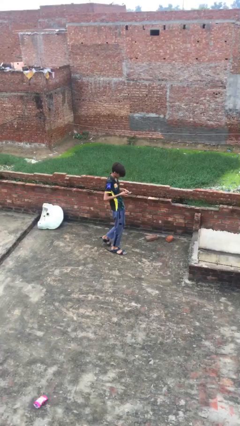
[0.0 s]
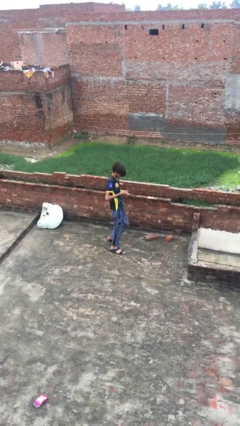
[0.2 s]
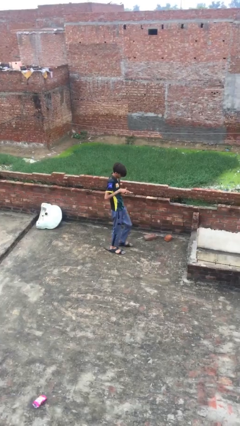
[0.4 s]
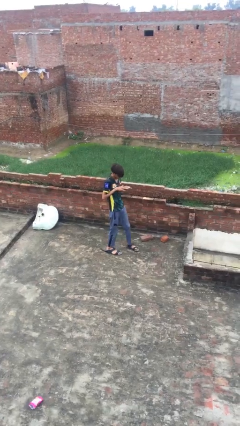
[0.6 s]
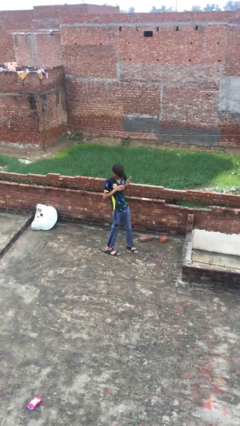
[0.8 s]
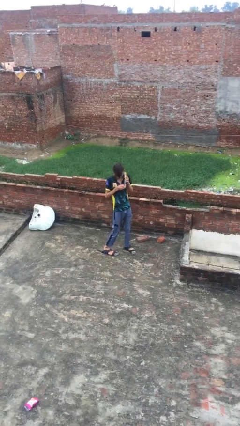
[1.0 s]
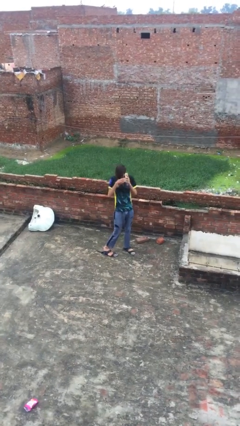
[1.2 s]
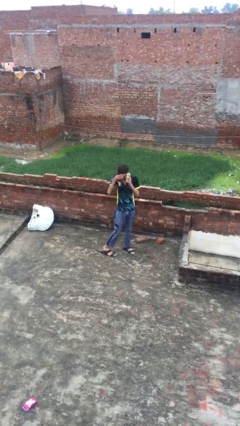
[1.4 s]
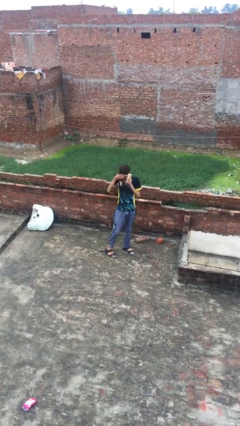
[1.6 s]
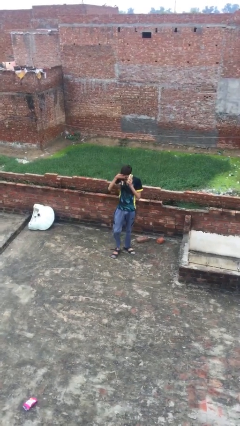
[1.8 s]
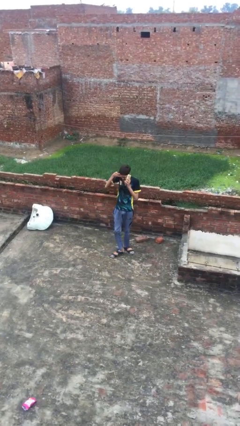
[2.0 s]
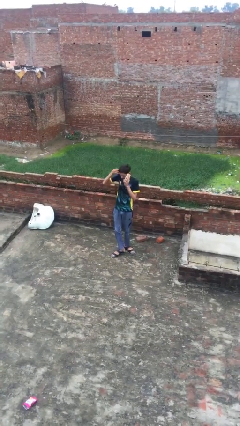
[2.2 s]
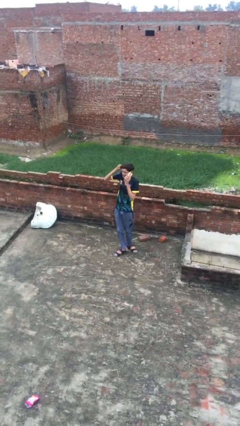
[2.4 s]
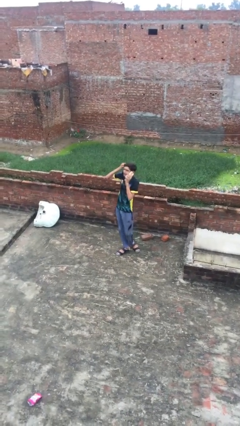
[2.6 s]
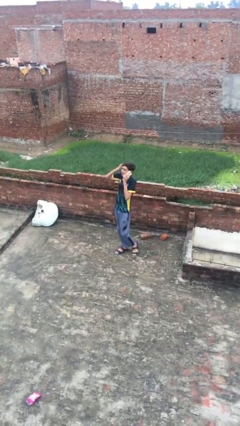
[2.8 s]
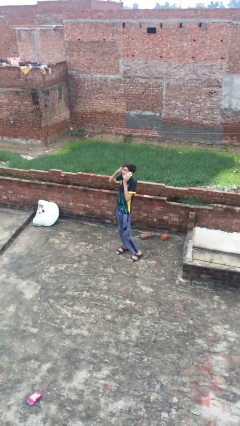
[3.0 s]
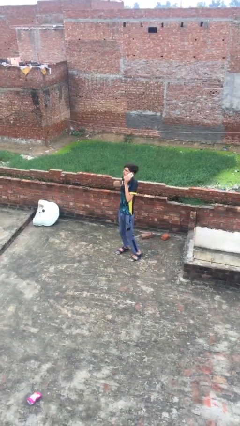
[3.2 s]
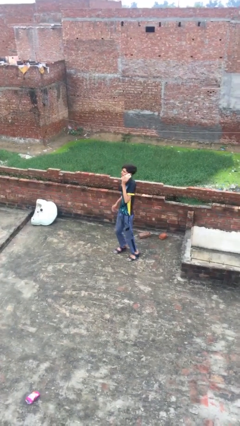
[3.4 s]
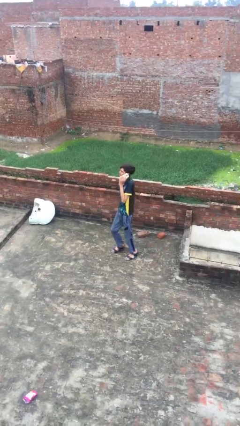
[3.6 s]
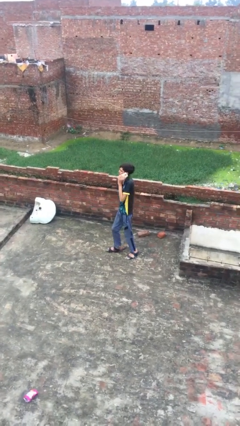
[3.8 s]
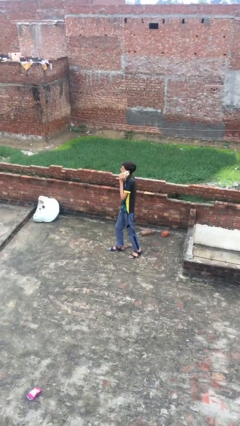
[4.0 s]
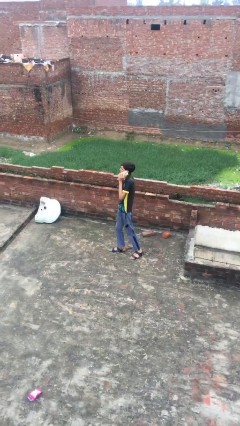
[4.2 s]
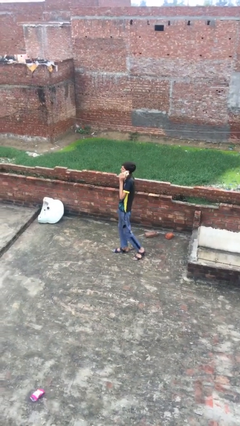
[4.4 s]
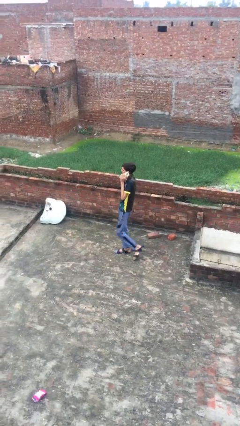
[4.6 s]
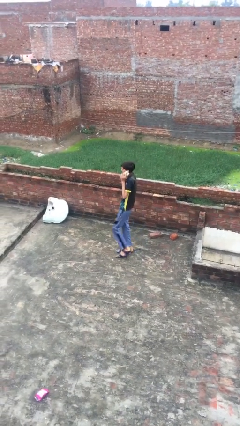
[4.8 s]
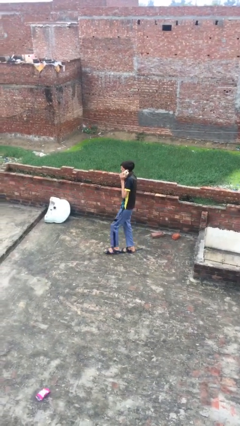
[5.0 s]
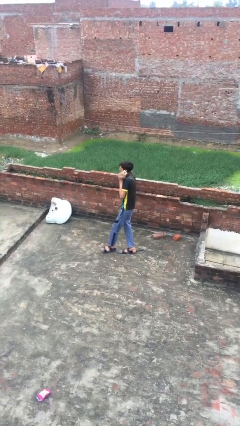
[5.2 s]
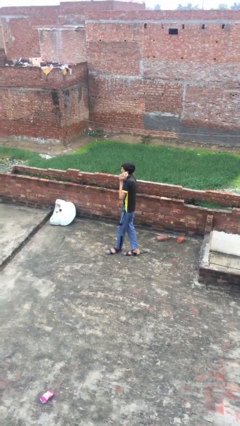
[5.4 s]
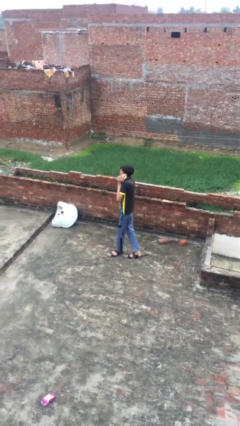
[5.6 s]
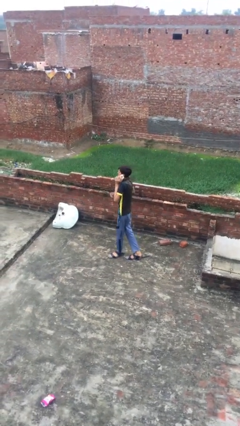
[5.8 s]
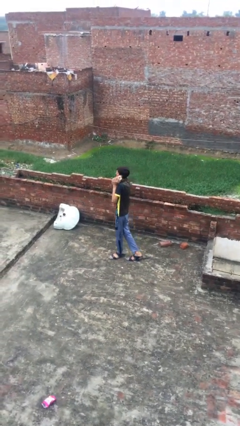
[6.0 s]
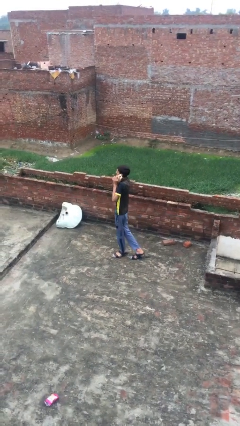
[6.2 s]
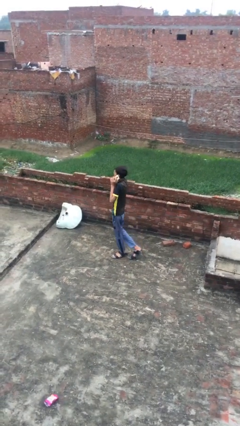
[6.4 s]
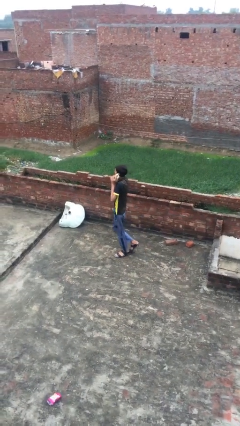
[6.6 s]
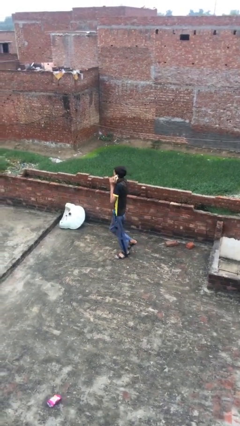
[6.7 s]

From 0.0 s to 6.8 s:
person talks on phone

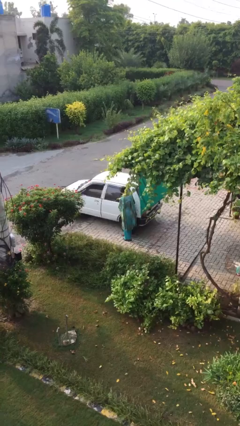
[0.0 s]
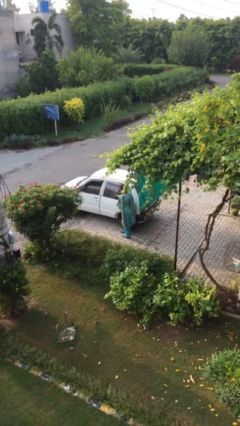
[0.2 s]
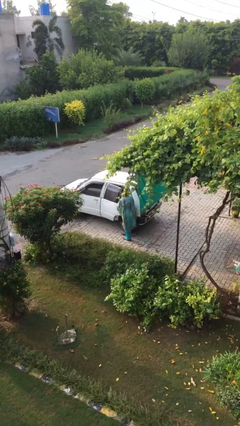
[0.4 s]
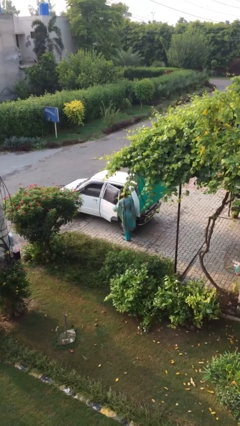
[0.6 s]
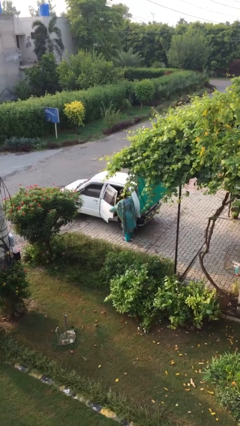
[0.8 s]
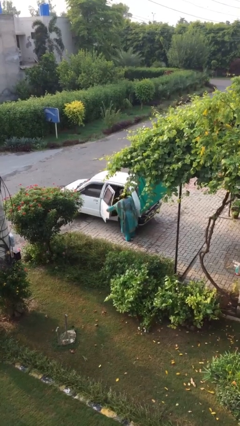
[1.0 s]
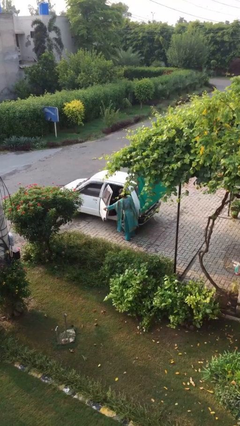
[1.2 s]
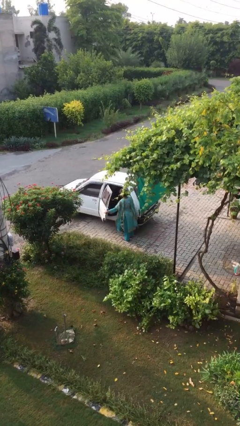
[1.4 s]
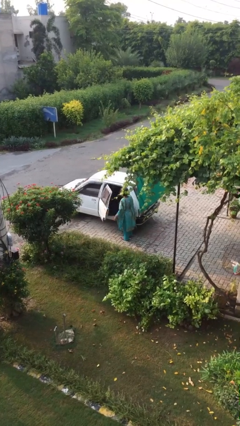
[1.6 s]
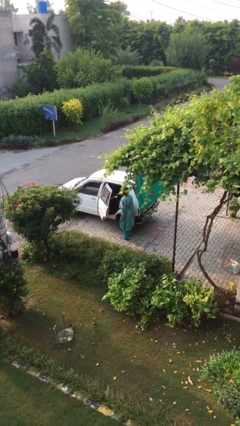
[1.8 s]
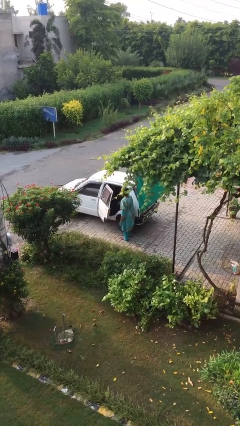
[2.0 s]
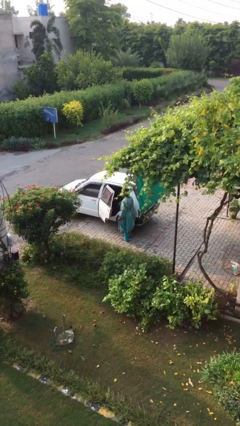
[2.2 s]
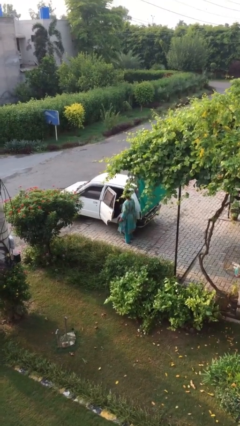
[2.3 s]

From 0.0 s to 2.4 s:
person opens car door

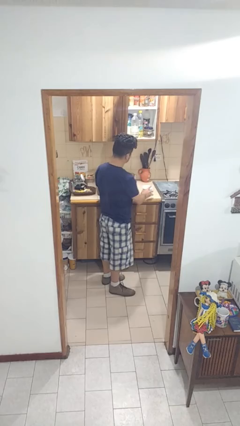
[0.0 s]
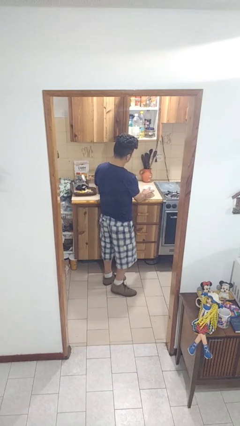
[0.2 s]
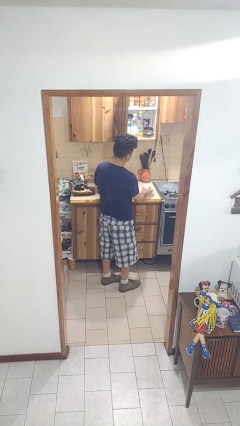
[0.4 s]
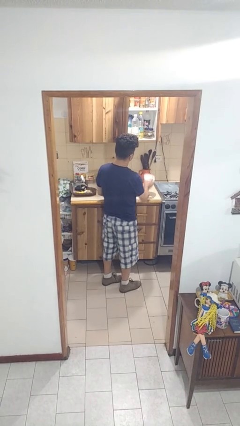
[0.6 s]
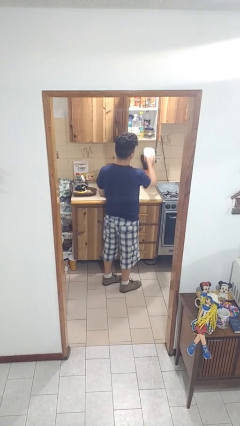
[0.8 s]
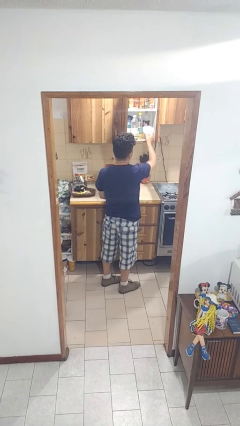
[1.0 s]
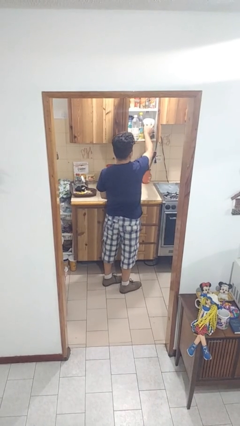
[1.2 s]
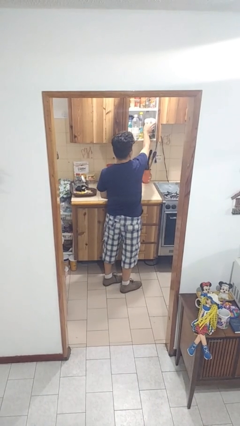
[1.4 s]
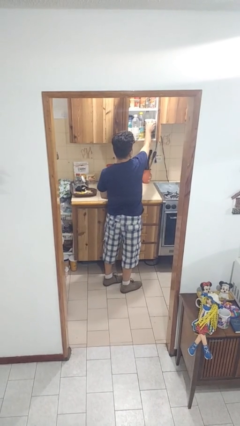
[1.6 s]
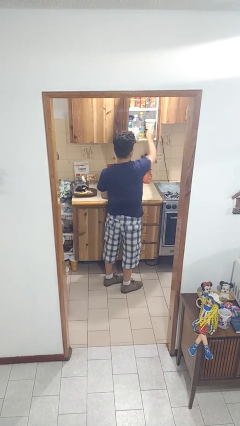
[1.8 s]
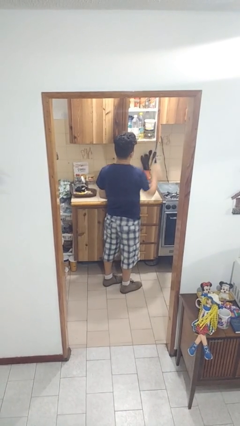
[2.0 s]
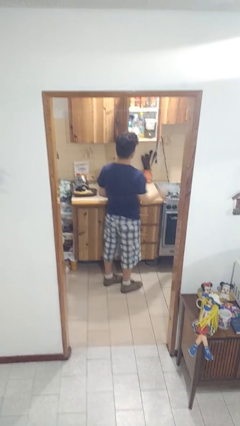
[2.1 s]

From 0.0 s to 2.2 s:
person puts object in cabinet

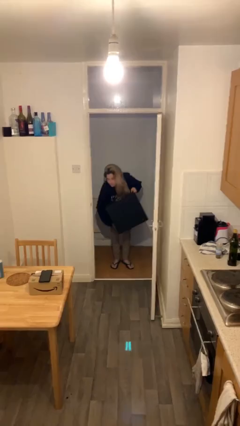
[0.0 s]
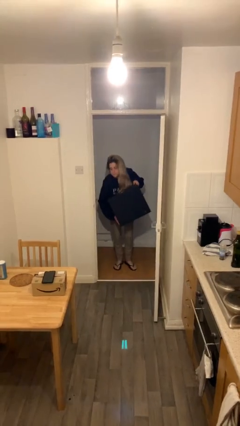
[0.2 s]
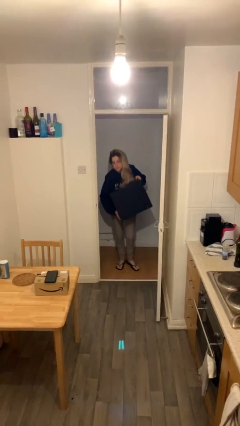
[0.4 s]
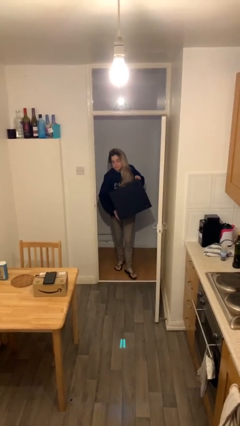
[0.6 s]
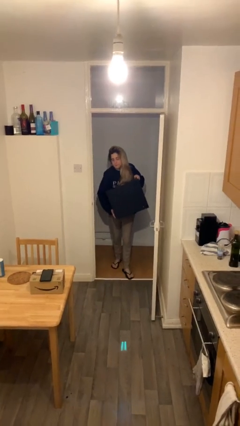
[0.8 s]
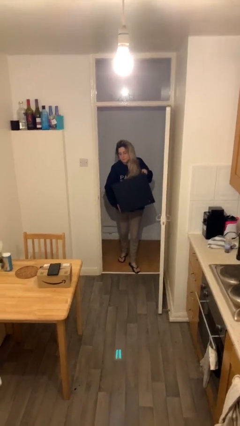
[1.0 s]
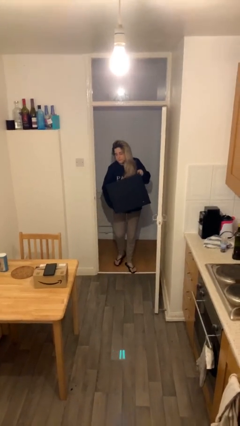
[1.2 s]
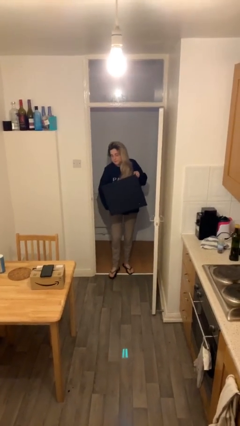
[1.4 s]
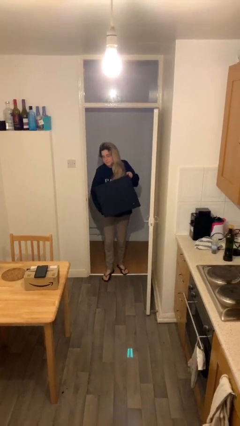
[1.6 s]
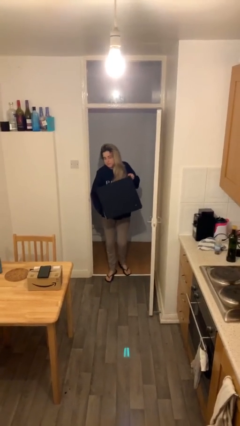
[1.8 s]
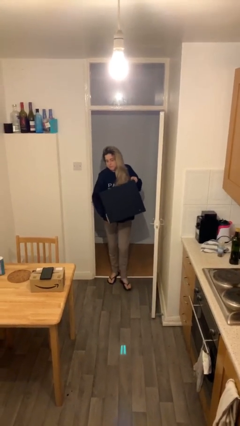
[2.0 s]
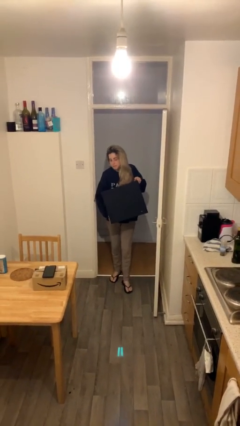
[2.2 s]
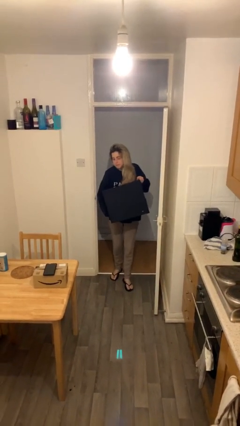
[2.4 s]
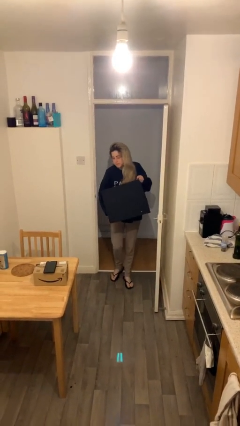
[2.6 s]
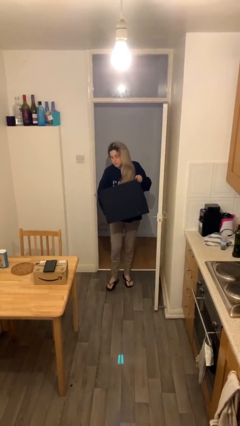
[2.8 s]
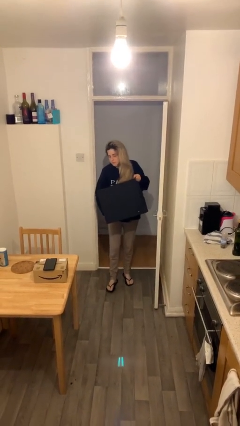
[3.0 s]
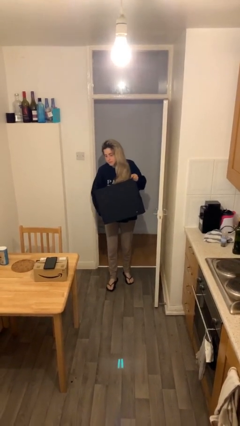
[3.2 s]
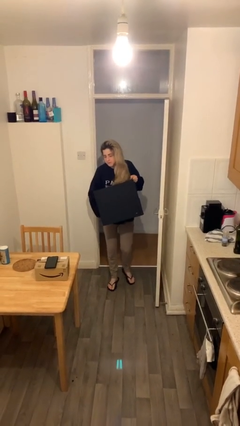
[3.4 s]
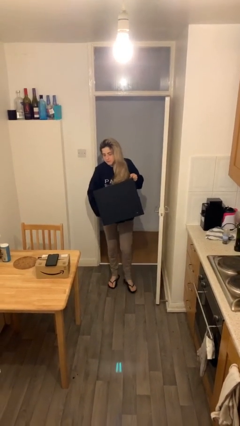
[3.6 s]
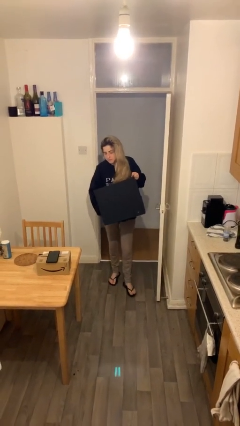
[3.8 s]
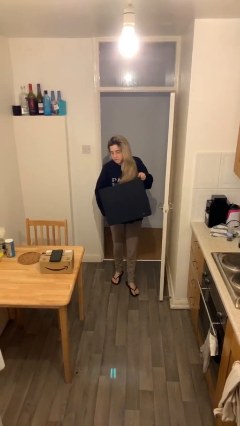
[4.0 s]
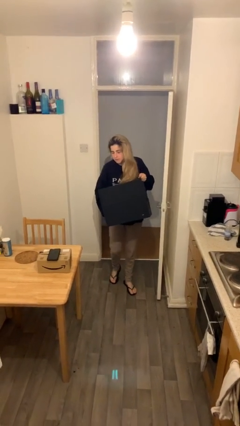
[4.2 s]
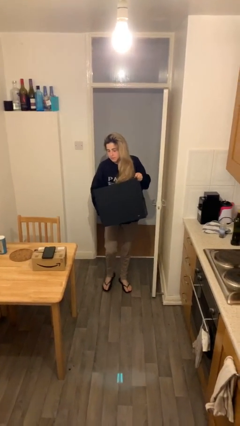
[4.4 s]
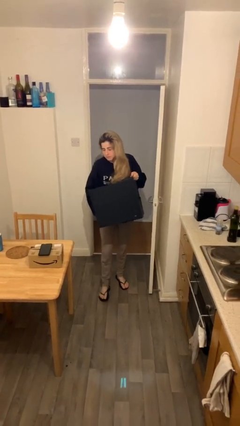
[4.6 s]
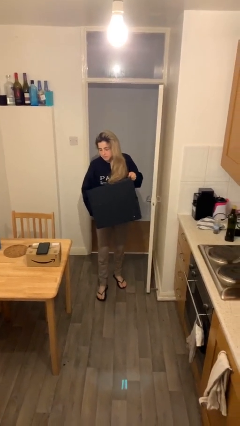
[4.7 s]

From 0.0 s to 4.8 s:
person carries heavy object

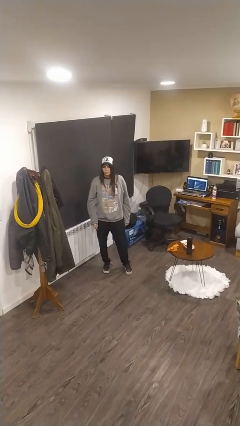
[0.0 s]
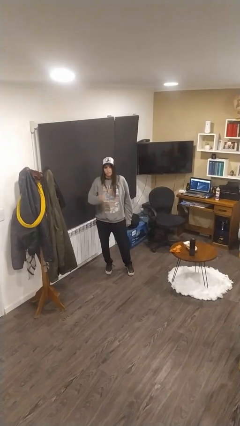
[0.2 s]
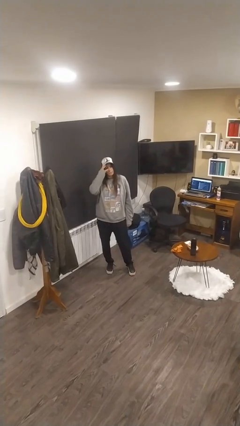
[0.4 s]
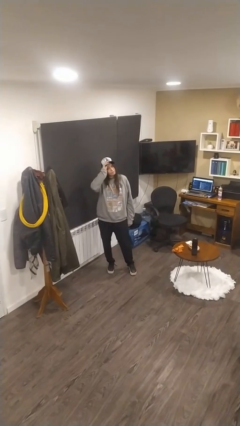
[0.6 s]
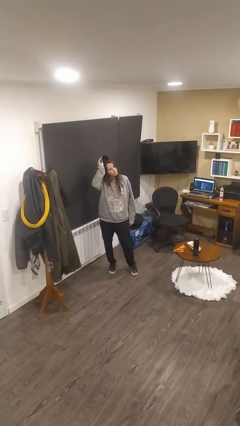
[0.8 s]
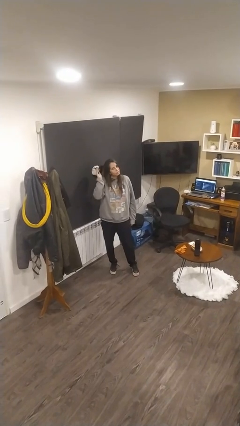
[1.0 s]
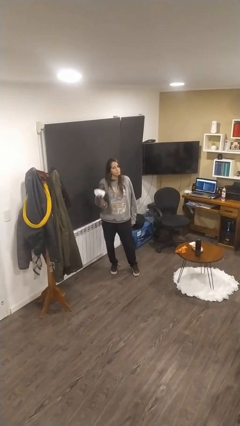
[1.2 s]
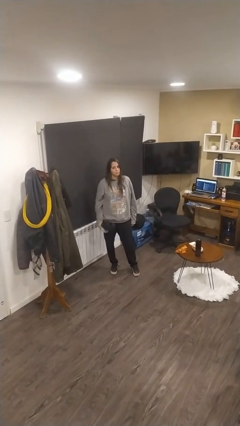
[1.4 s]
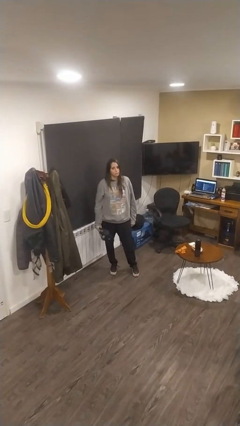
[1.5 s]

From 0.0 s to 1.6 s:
person takes off hat
